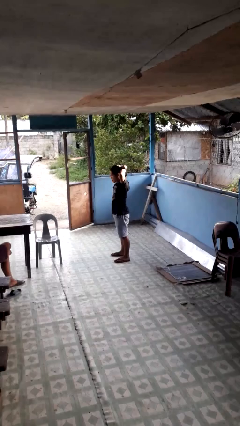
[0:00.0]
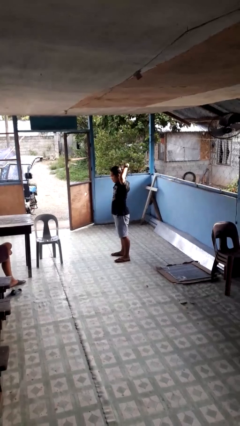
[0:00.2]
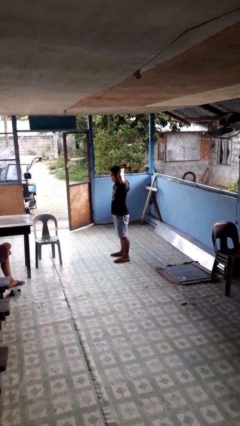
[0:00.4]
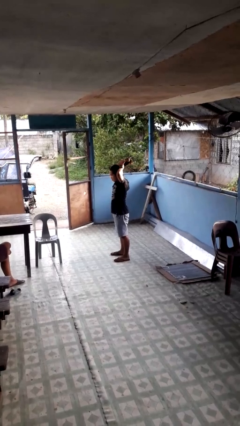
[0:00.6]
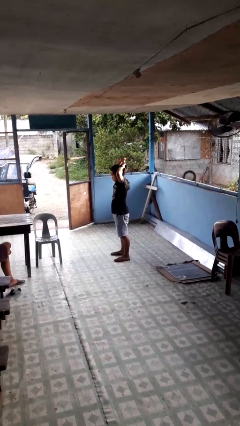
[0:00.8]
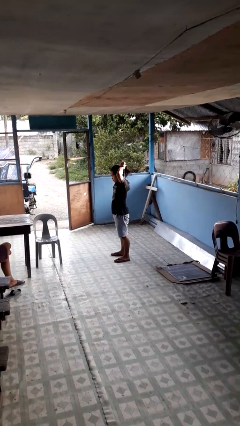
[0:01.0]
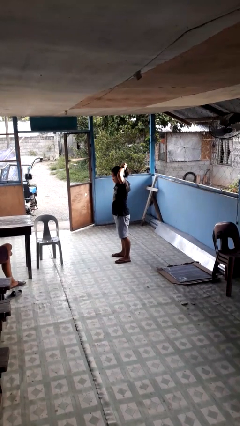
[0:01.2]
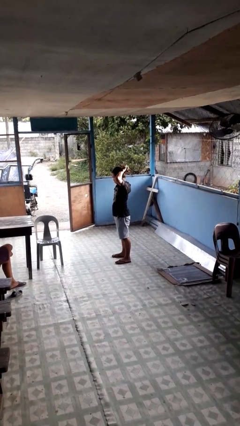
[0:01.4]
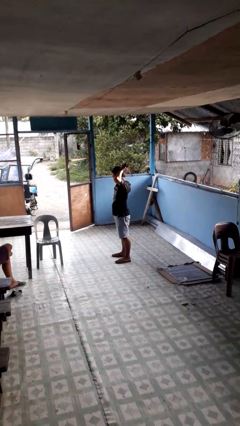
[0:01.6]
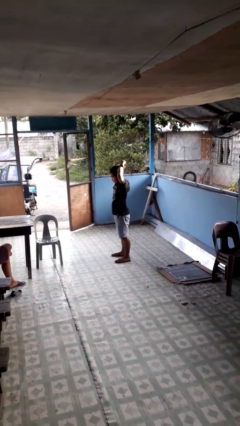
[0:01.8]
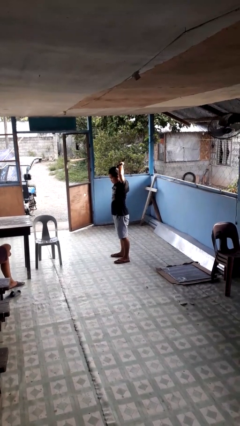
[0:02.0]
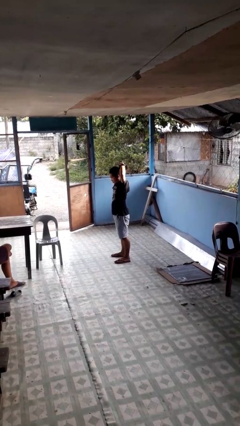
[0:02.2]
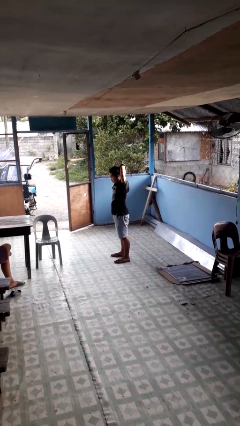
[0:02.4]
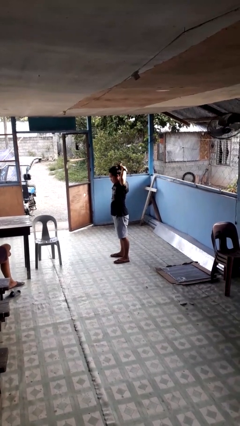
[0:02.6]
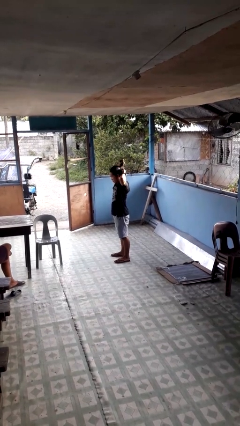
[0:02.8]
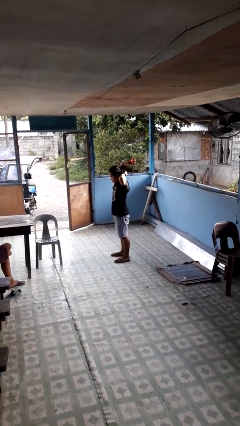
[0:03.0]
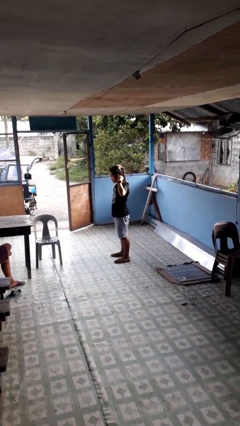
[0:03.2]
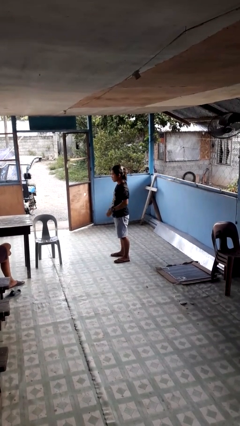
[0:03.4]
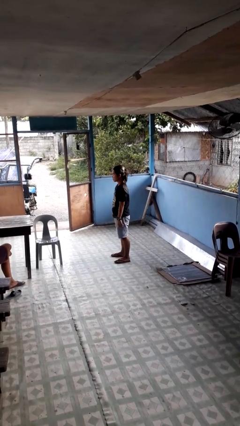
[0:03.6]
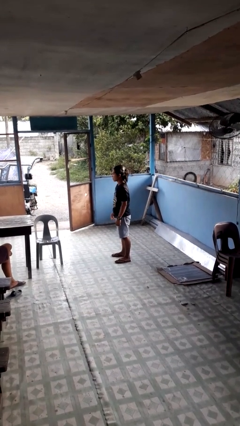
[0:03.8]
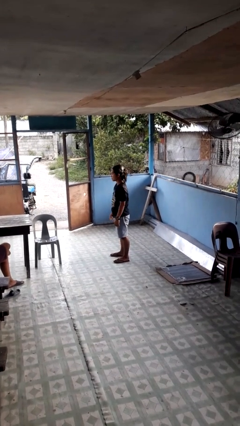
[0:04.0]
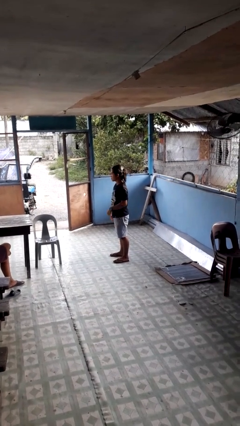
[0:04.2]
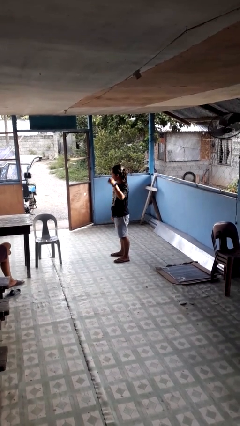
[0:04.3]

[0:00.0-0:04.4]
person puts hair in ponytail

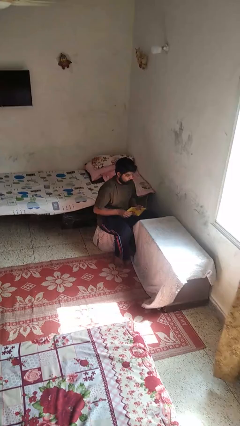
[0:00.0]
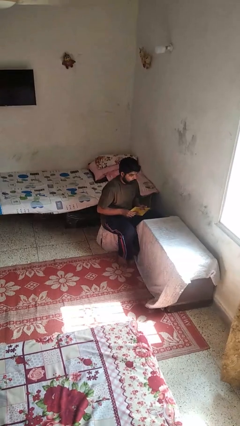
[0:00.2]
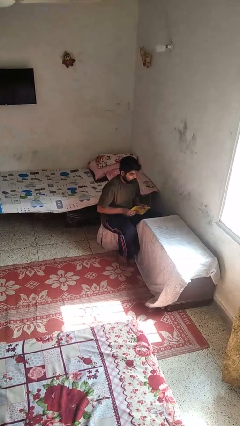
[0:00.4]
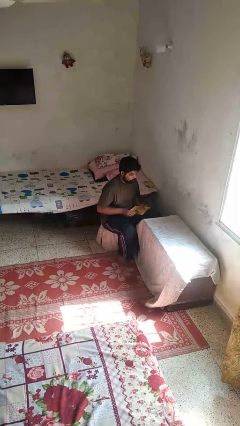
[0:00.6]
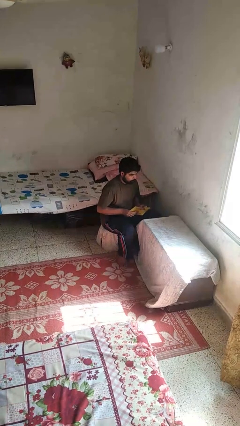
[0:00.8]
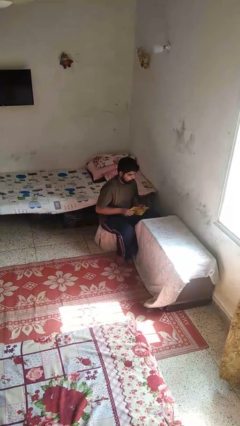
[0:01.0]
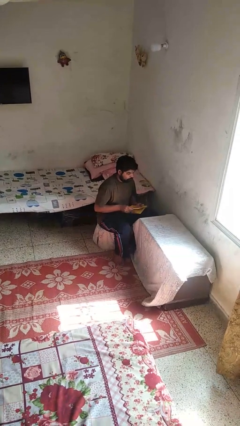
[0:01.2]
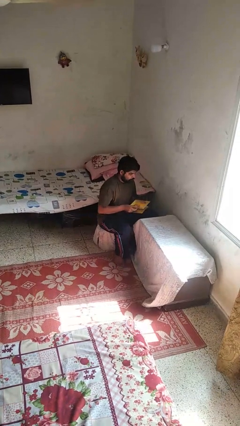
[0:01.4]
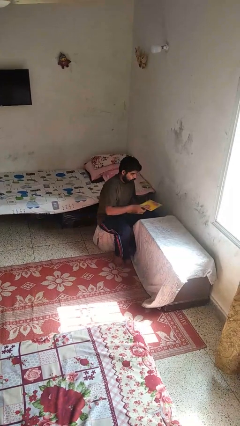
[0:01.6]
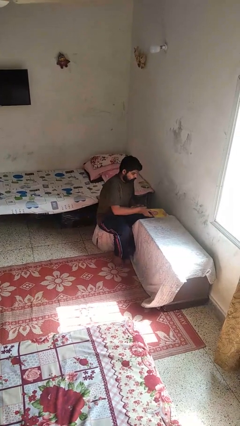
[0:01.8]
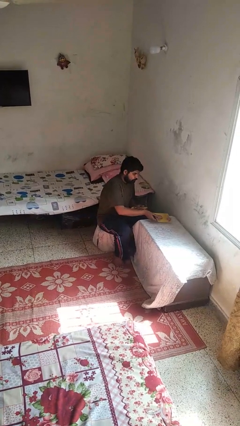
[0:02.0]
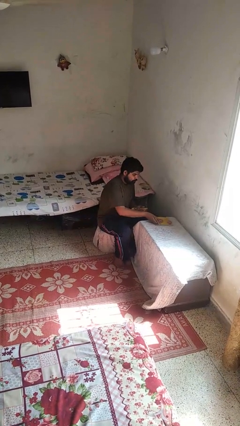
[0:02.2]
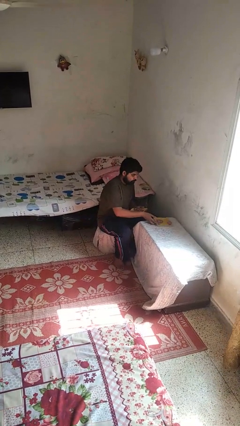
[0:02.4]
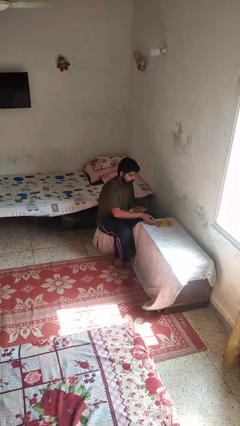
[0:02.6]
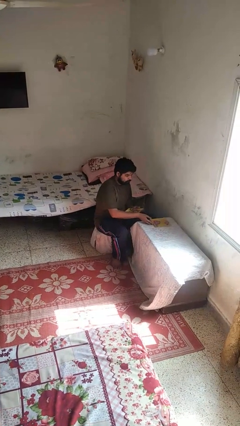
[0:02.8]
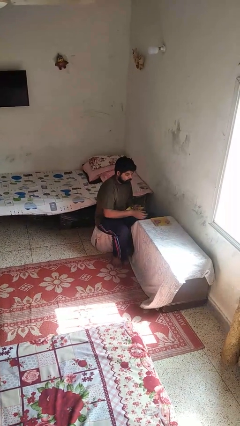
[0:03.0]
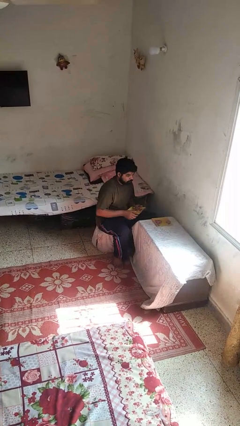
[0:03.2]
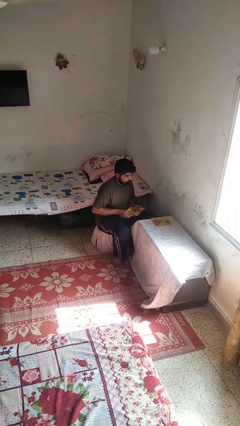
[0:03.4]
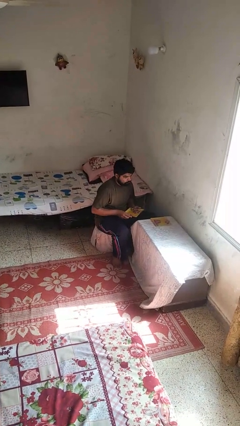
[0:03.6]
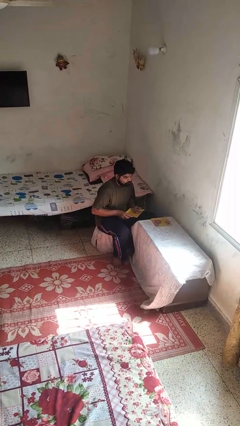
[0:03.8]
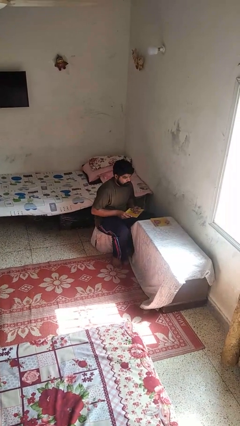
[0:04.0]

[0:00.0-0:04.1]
person sets table

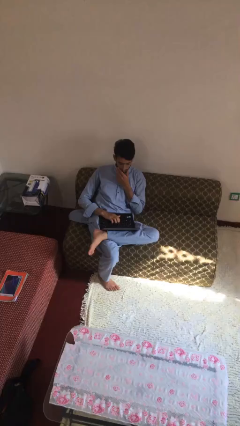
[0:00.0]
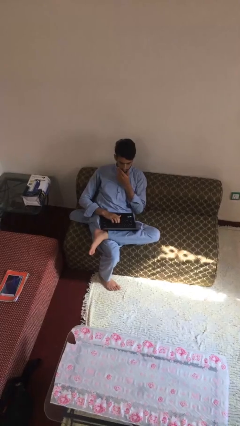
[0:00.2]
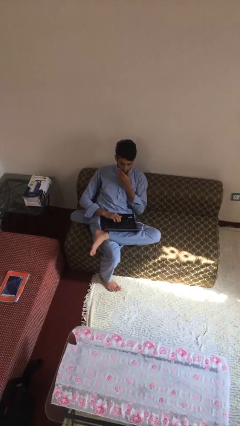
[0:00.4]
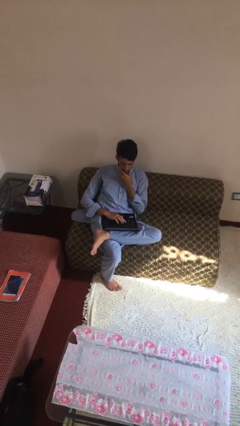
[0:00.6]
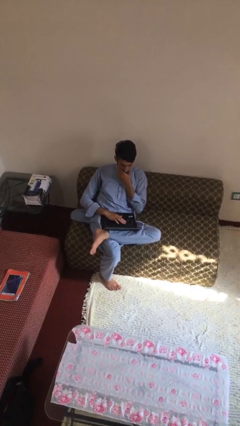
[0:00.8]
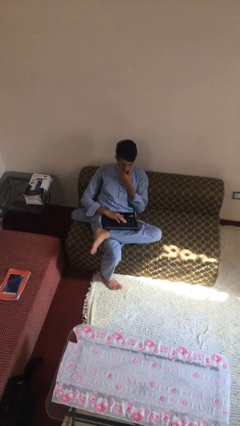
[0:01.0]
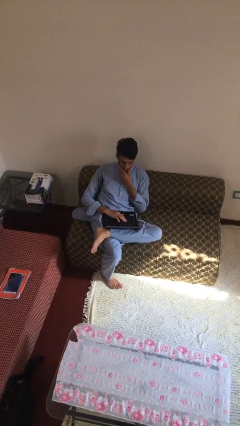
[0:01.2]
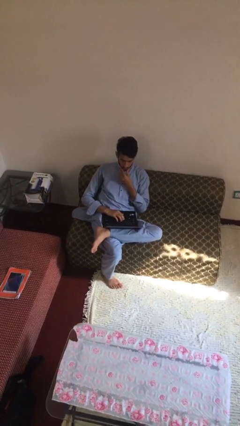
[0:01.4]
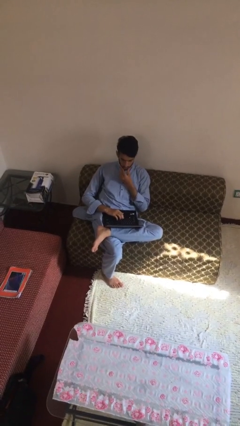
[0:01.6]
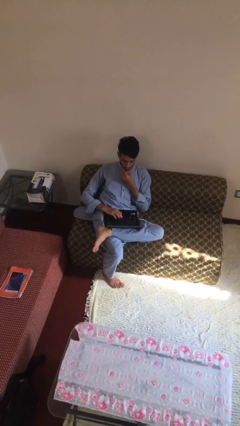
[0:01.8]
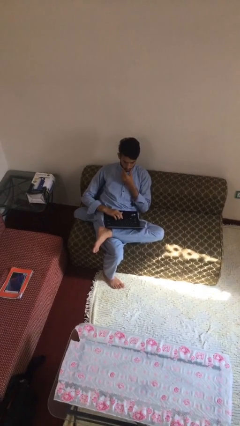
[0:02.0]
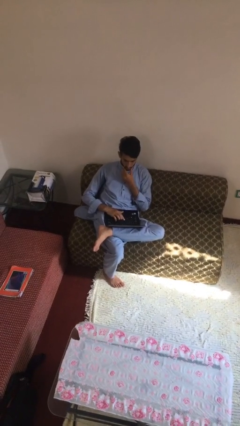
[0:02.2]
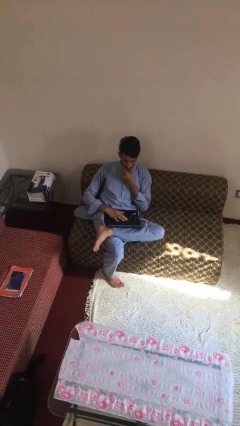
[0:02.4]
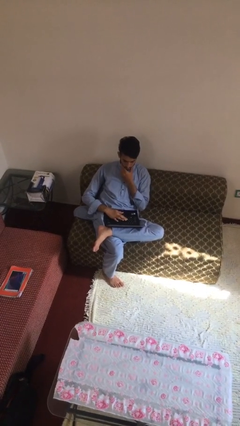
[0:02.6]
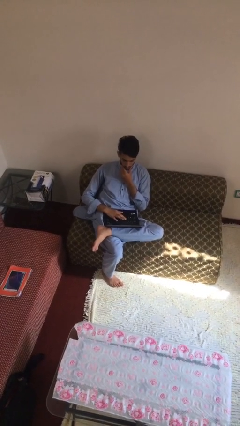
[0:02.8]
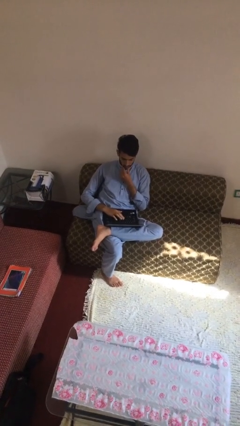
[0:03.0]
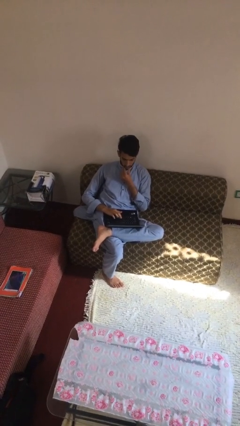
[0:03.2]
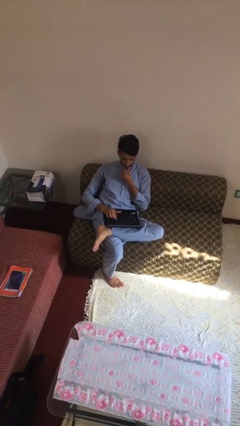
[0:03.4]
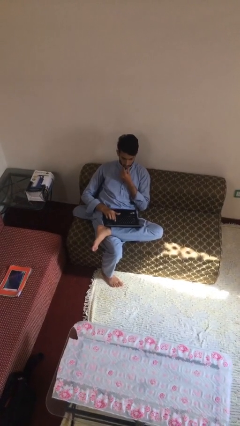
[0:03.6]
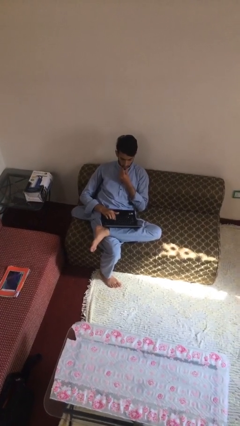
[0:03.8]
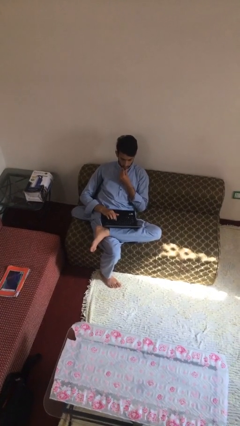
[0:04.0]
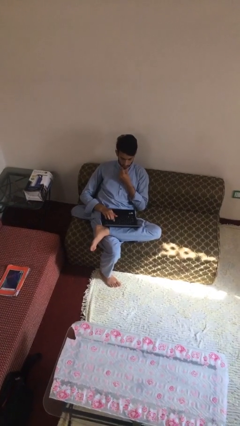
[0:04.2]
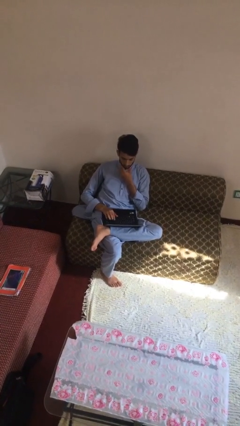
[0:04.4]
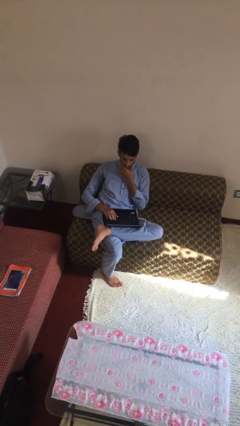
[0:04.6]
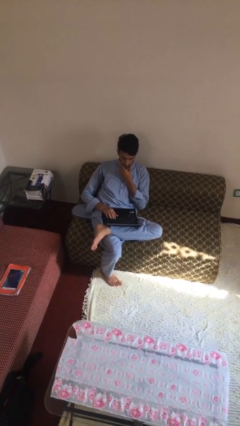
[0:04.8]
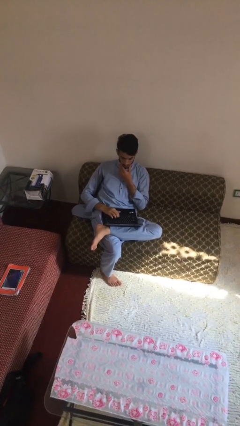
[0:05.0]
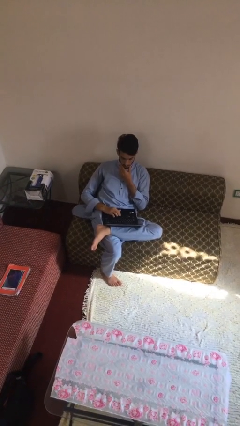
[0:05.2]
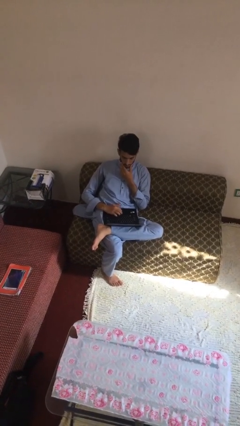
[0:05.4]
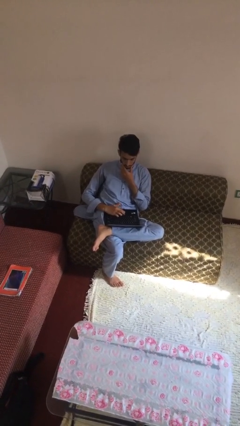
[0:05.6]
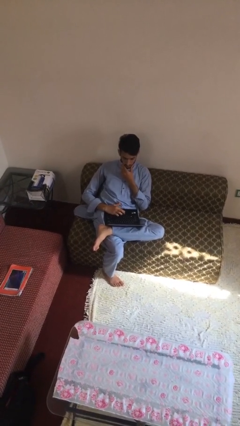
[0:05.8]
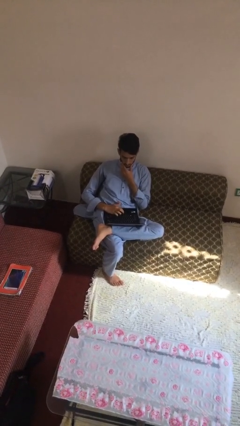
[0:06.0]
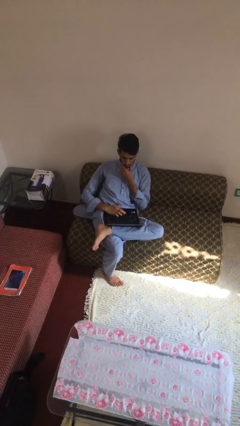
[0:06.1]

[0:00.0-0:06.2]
person interacts with laptop

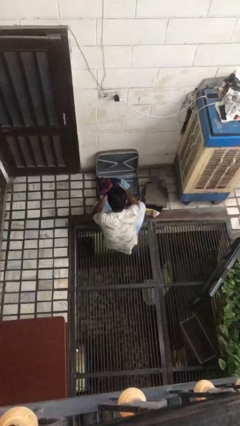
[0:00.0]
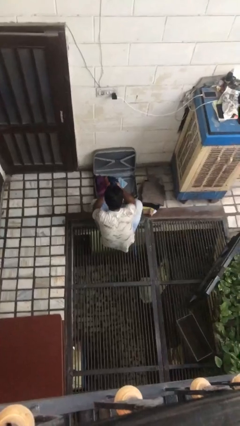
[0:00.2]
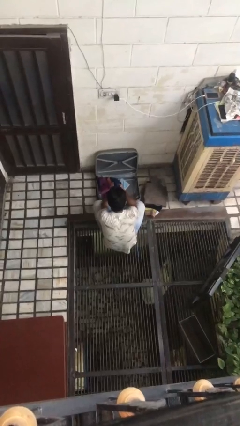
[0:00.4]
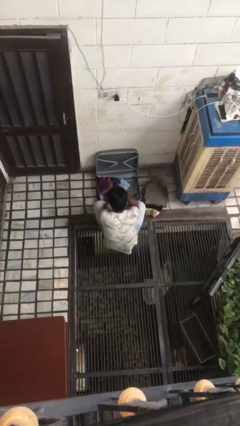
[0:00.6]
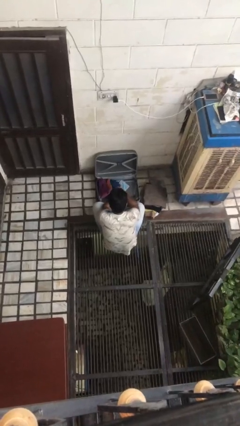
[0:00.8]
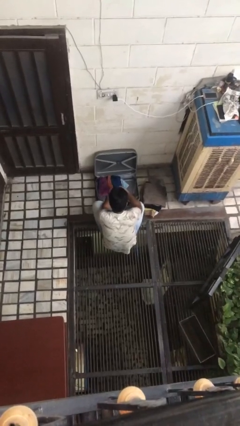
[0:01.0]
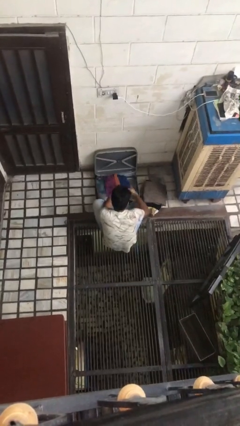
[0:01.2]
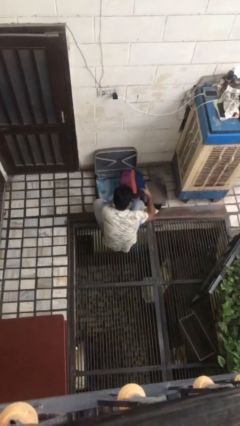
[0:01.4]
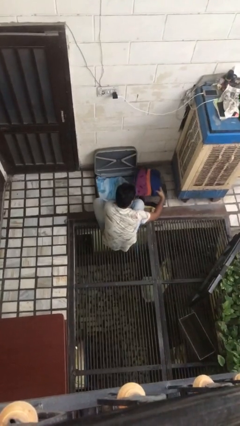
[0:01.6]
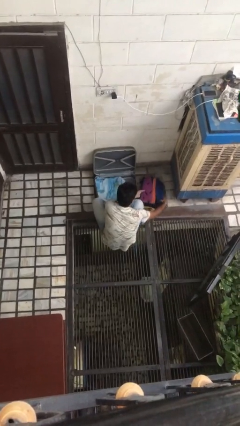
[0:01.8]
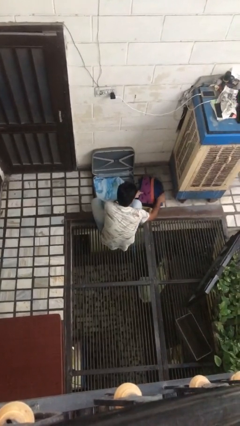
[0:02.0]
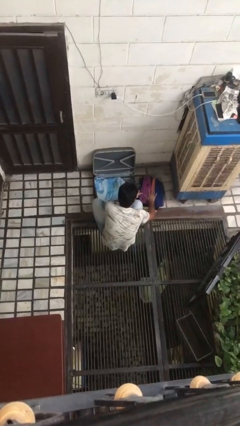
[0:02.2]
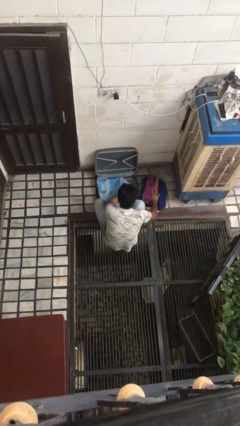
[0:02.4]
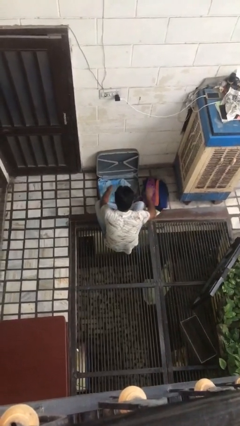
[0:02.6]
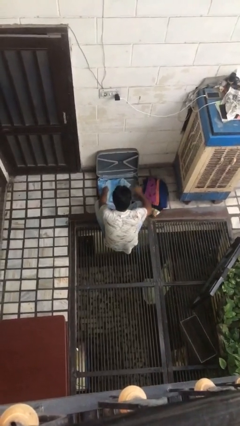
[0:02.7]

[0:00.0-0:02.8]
person unloads clothes from suitcase

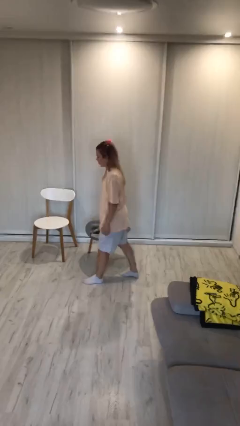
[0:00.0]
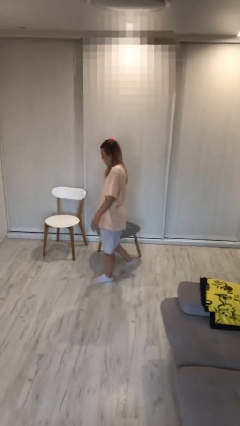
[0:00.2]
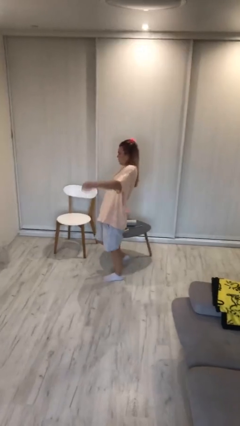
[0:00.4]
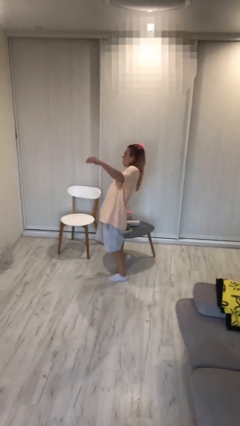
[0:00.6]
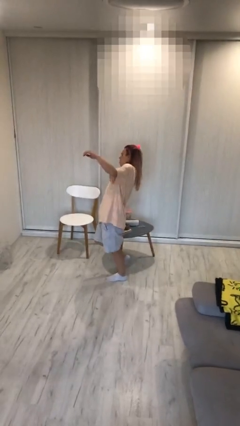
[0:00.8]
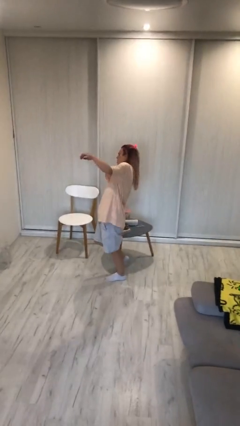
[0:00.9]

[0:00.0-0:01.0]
person bumps into table
